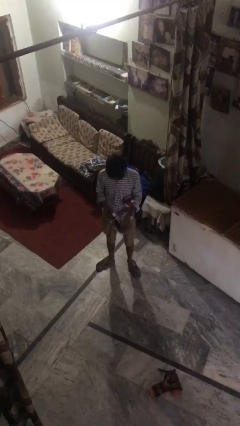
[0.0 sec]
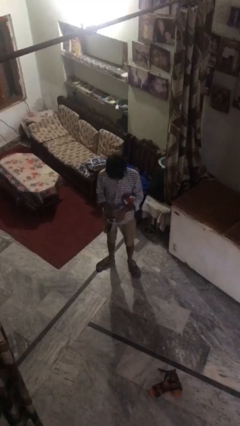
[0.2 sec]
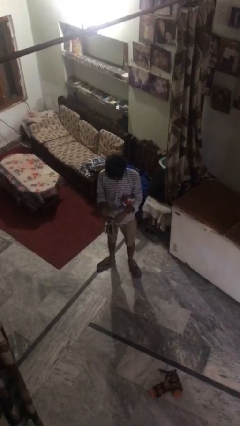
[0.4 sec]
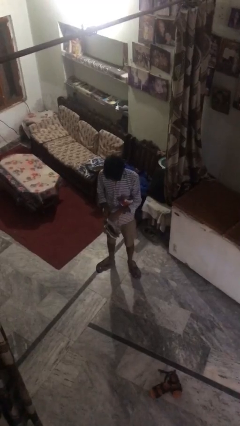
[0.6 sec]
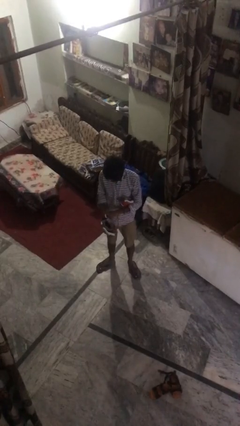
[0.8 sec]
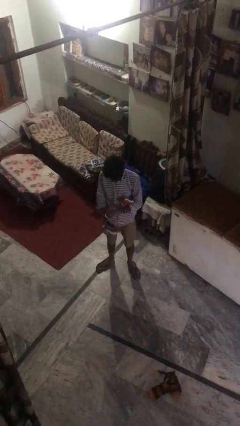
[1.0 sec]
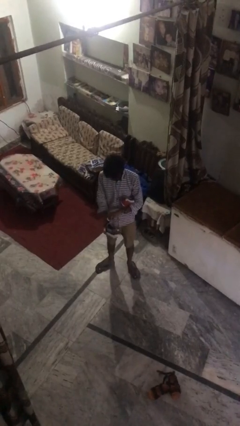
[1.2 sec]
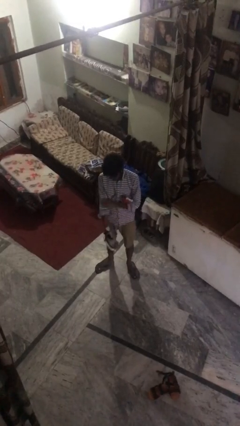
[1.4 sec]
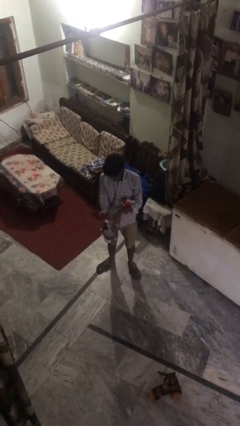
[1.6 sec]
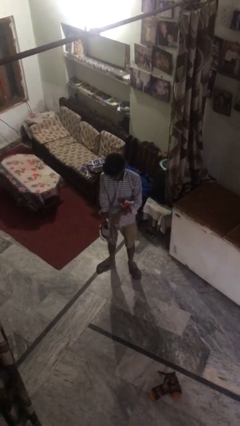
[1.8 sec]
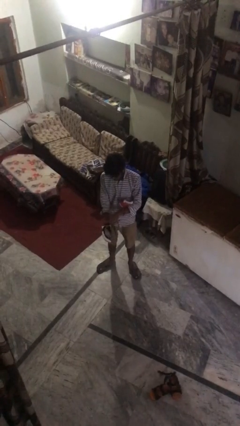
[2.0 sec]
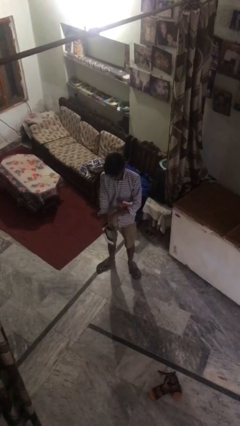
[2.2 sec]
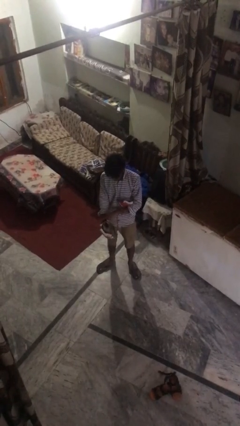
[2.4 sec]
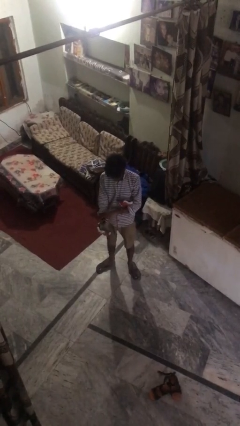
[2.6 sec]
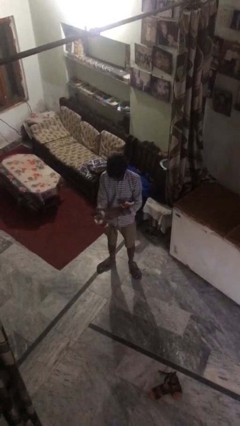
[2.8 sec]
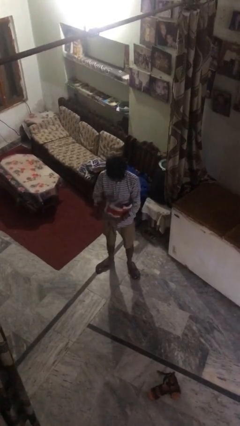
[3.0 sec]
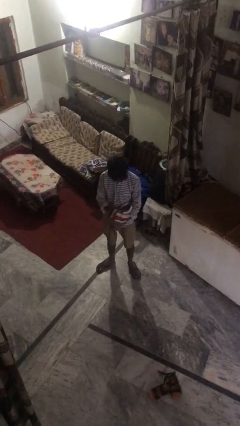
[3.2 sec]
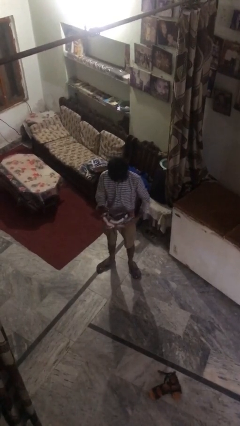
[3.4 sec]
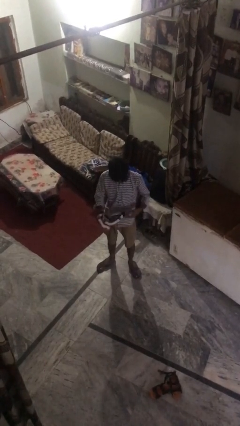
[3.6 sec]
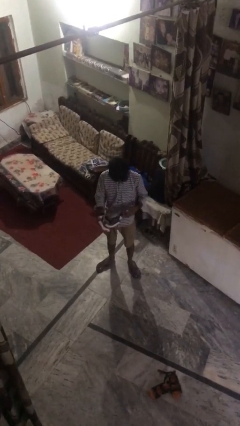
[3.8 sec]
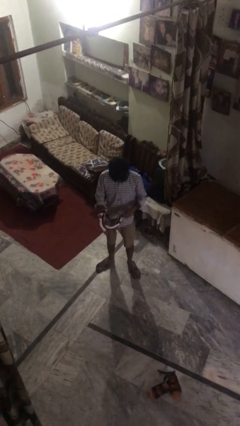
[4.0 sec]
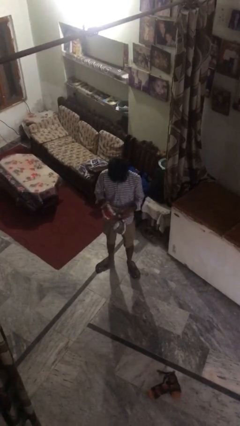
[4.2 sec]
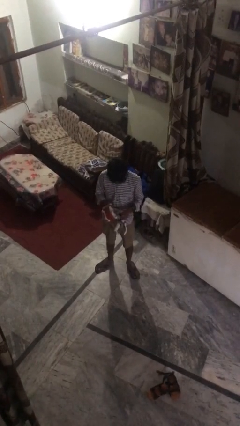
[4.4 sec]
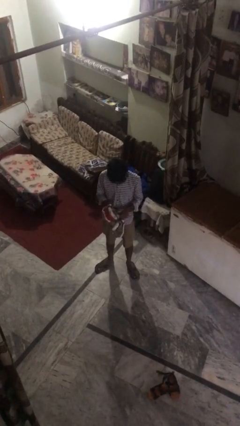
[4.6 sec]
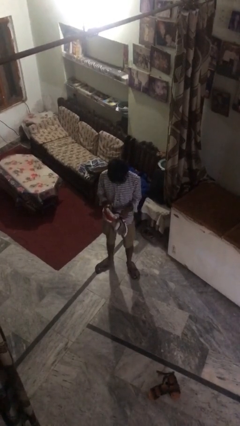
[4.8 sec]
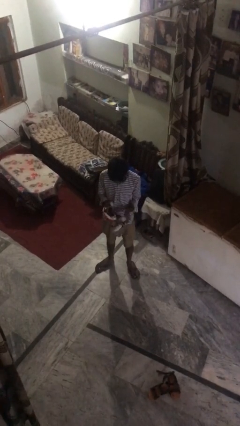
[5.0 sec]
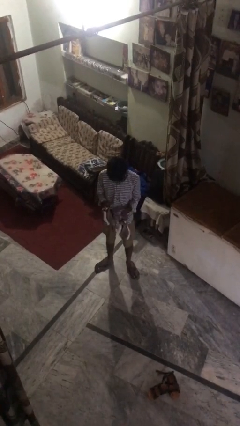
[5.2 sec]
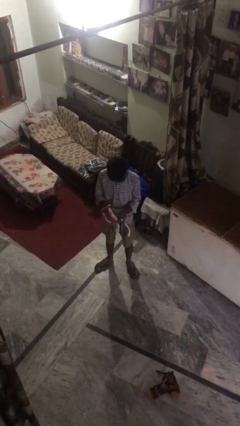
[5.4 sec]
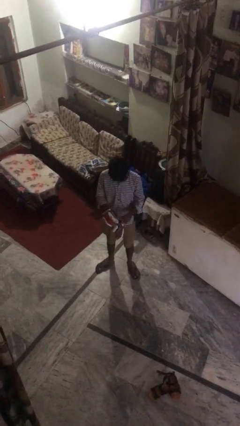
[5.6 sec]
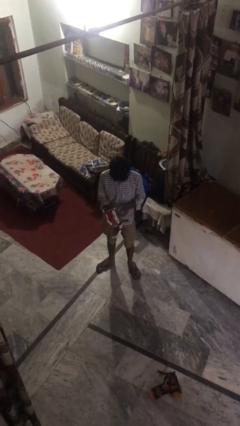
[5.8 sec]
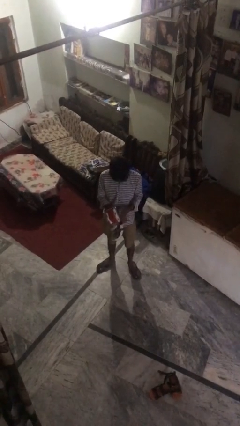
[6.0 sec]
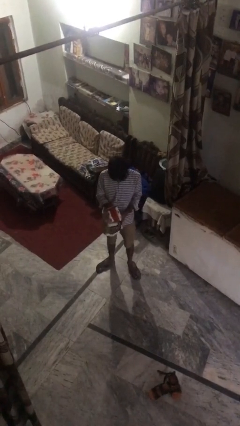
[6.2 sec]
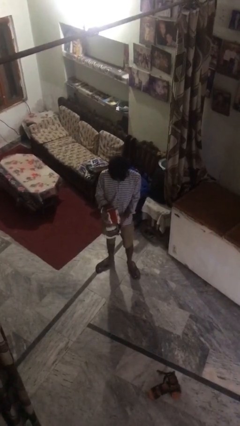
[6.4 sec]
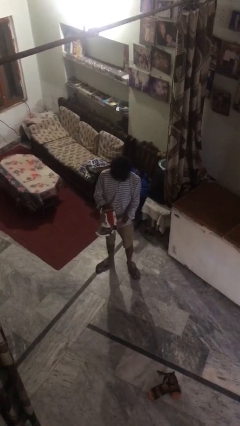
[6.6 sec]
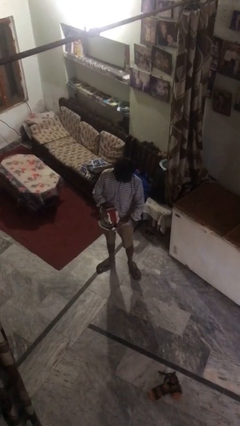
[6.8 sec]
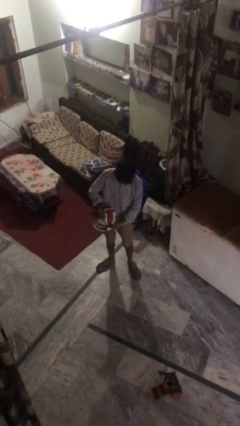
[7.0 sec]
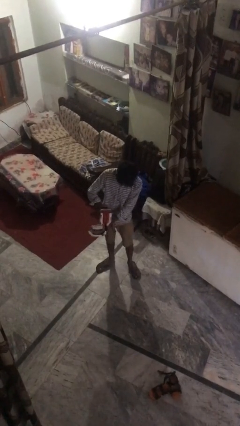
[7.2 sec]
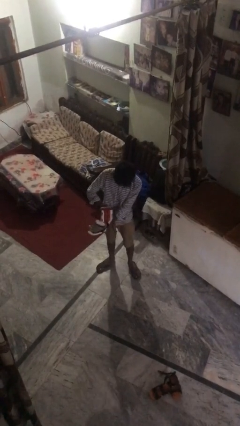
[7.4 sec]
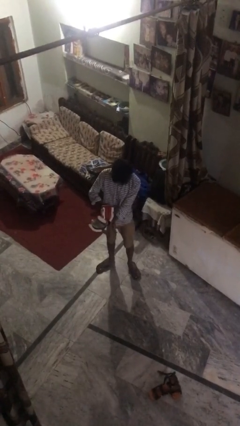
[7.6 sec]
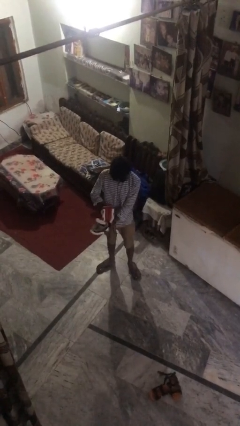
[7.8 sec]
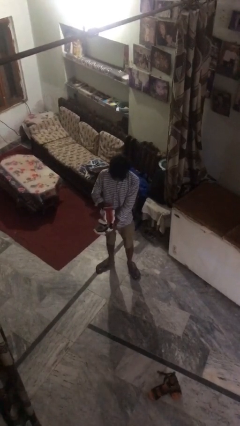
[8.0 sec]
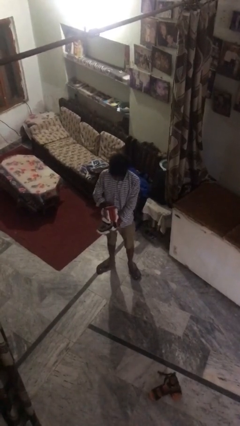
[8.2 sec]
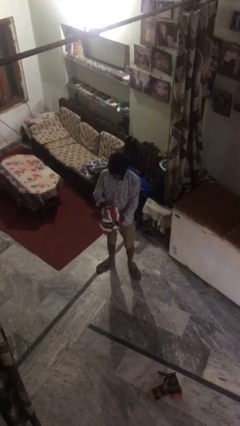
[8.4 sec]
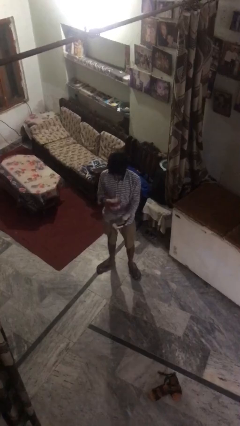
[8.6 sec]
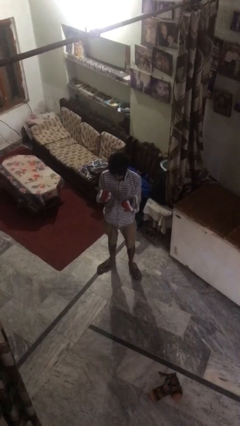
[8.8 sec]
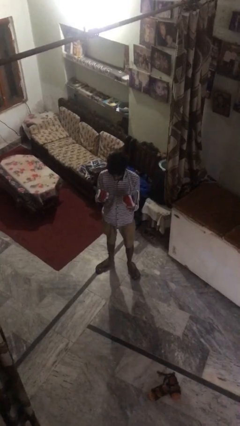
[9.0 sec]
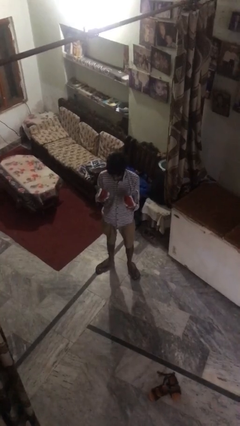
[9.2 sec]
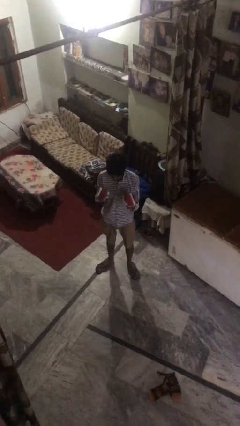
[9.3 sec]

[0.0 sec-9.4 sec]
person puts on gloves

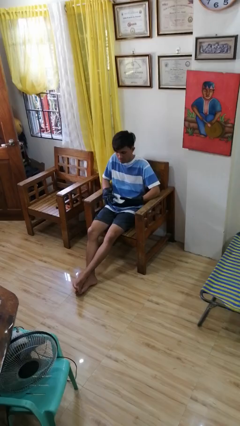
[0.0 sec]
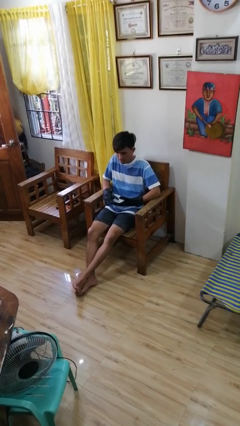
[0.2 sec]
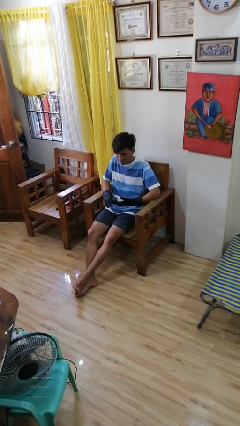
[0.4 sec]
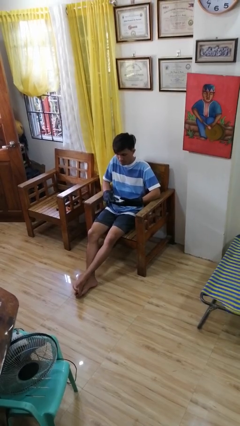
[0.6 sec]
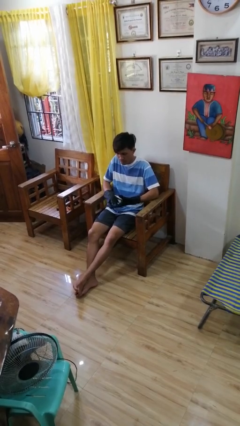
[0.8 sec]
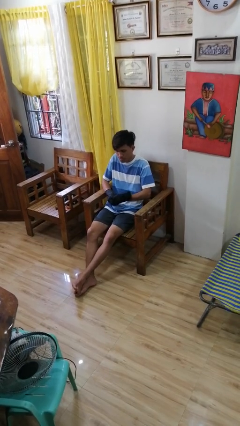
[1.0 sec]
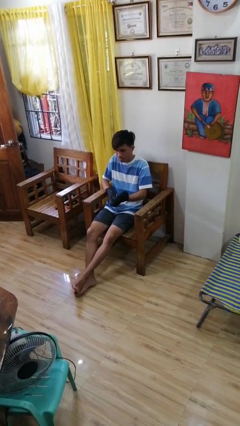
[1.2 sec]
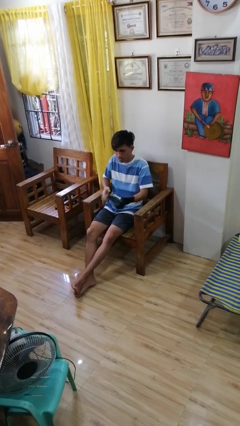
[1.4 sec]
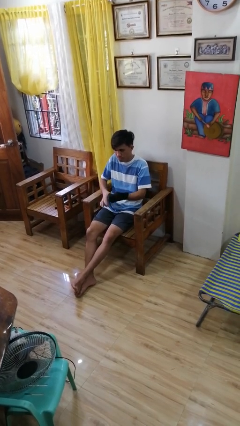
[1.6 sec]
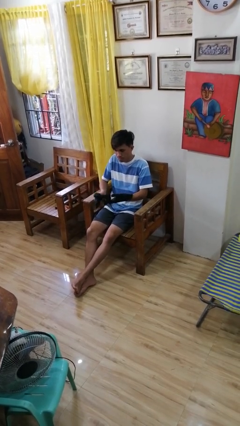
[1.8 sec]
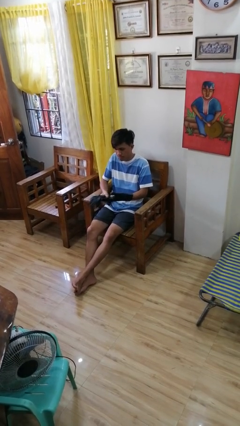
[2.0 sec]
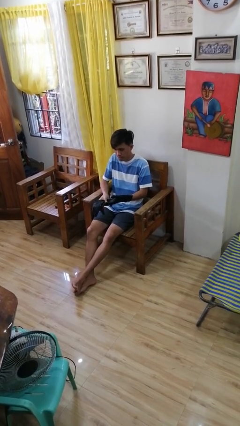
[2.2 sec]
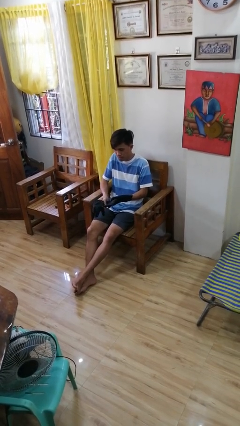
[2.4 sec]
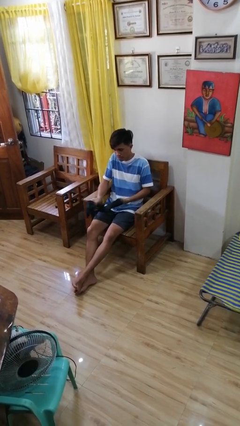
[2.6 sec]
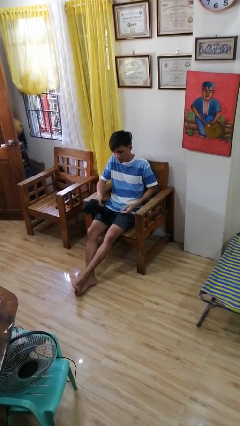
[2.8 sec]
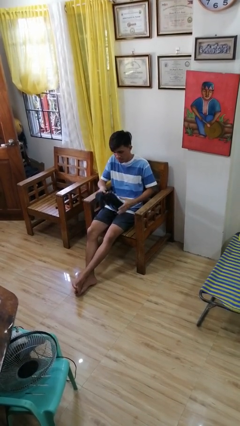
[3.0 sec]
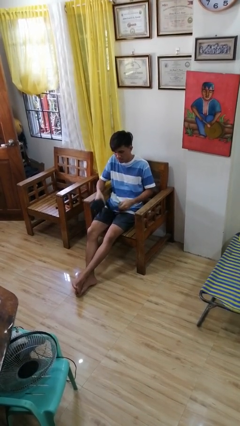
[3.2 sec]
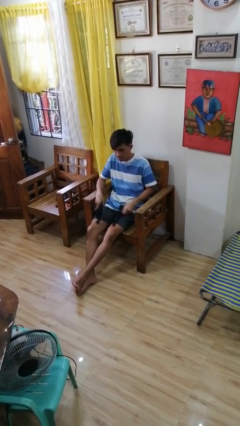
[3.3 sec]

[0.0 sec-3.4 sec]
person takes off gloves

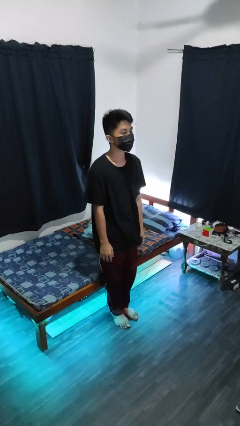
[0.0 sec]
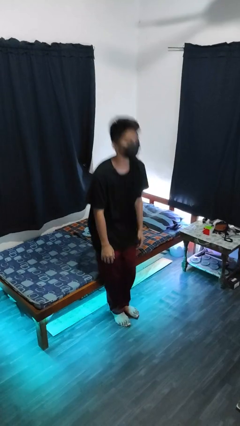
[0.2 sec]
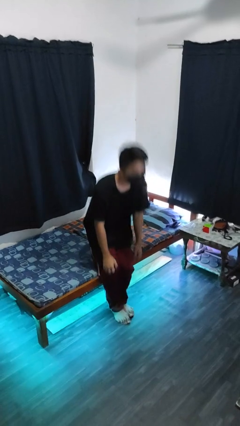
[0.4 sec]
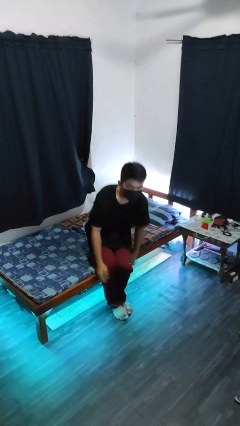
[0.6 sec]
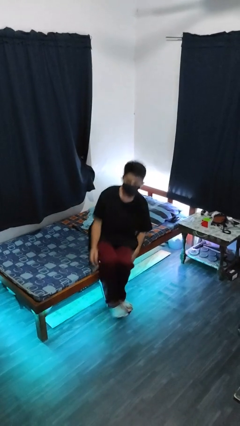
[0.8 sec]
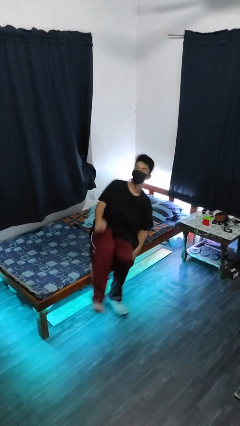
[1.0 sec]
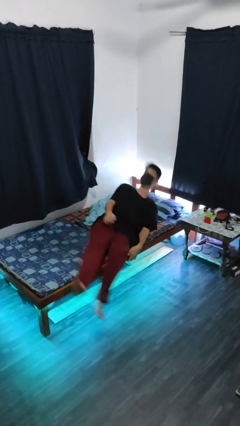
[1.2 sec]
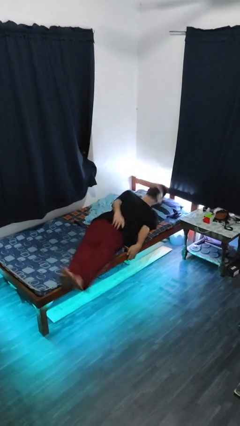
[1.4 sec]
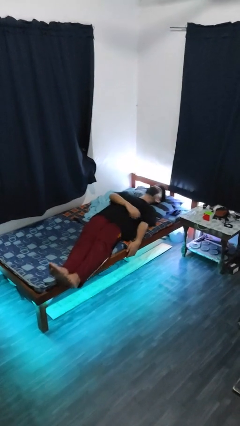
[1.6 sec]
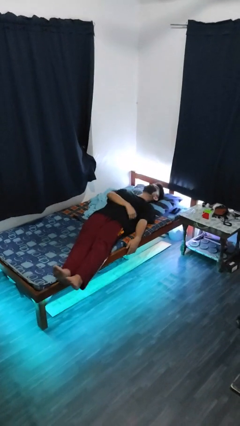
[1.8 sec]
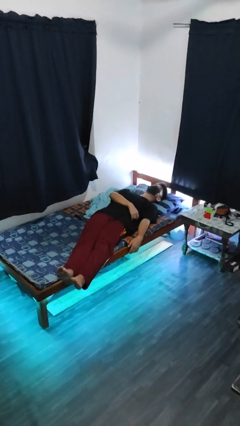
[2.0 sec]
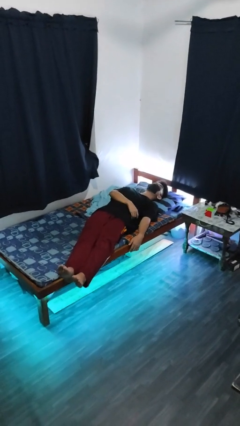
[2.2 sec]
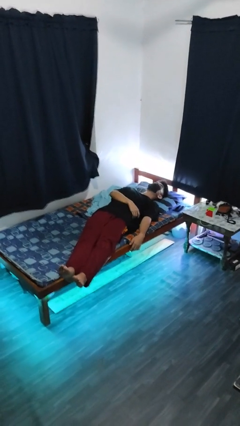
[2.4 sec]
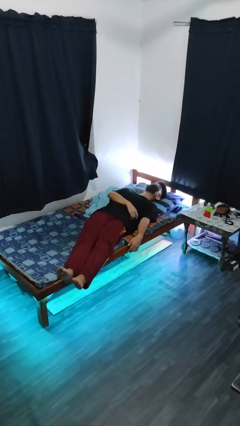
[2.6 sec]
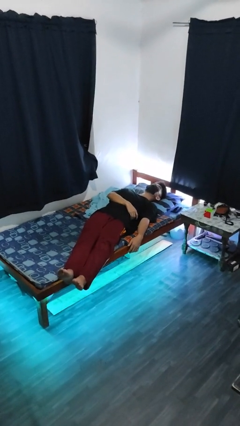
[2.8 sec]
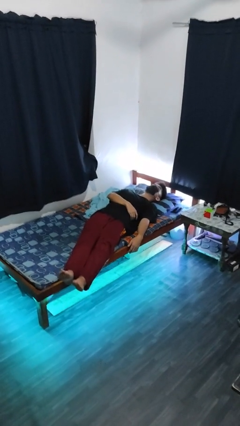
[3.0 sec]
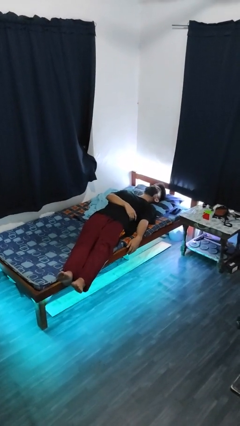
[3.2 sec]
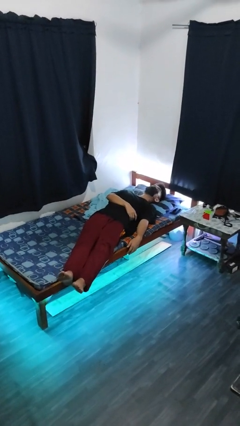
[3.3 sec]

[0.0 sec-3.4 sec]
person lies down on bed

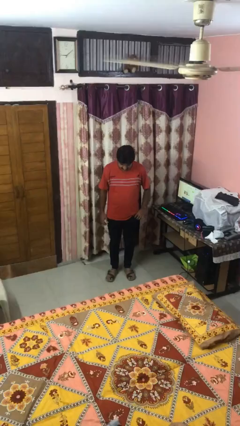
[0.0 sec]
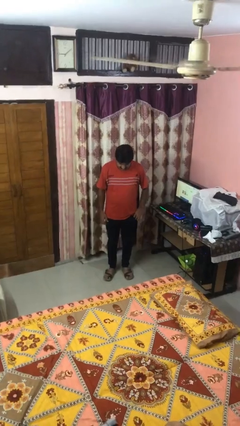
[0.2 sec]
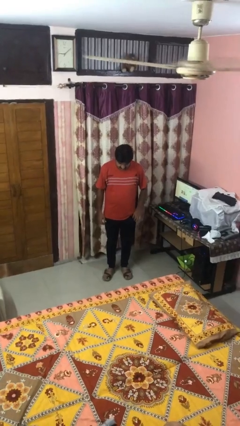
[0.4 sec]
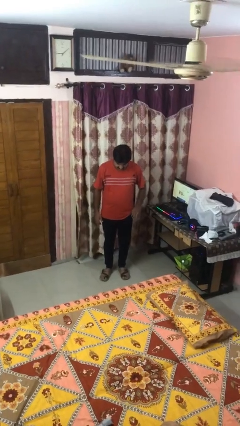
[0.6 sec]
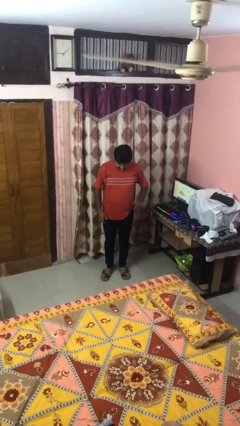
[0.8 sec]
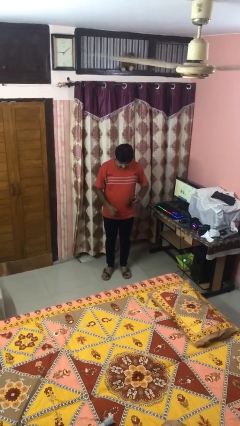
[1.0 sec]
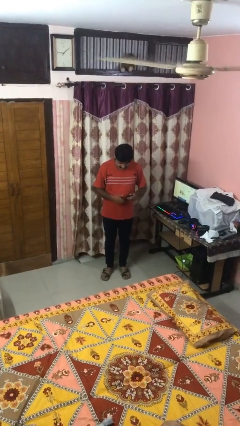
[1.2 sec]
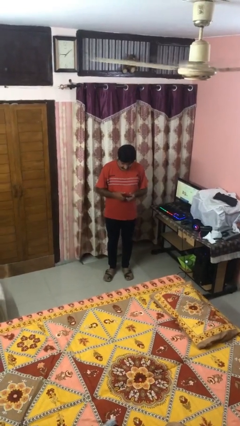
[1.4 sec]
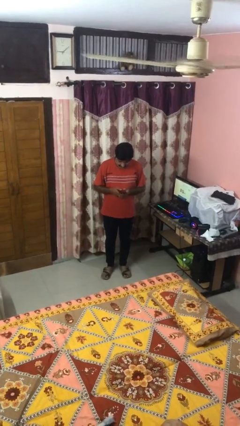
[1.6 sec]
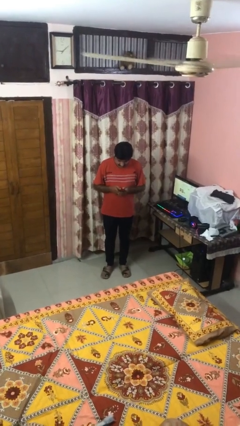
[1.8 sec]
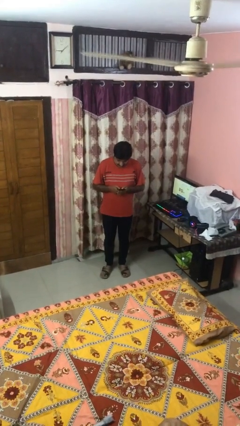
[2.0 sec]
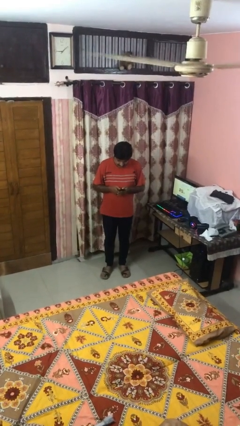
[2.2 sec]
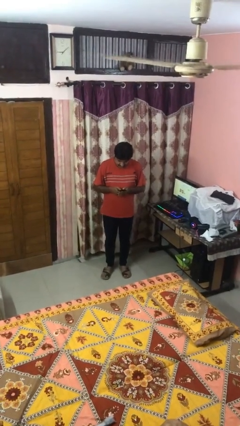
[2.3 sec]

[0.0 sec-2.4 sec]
person takes phone from pocket
